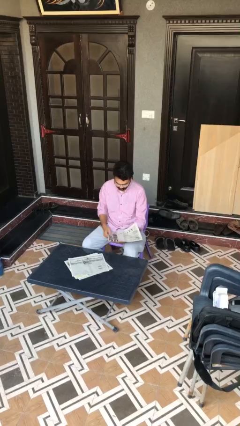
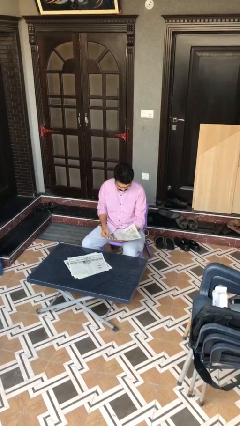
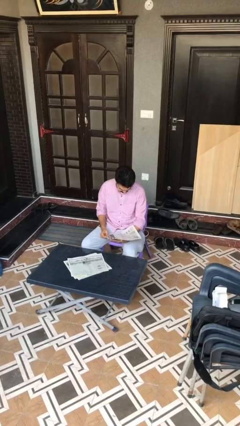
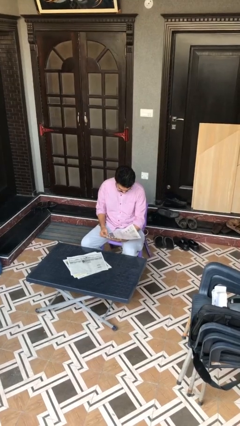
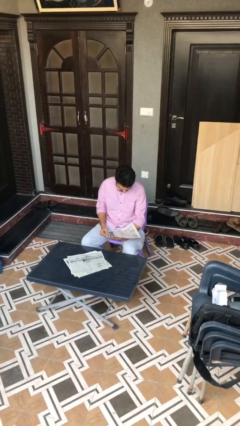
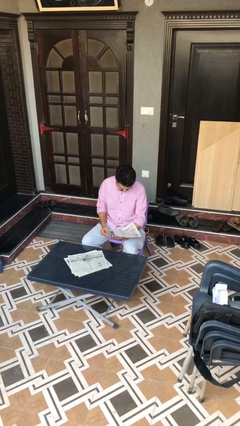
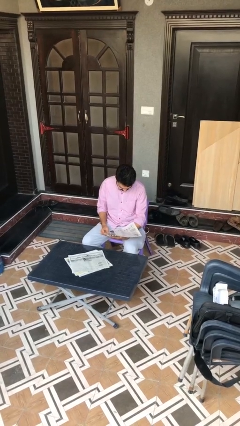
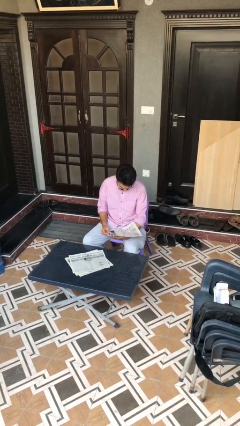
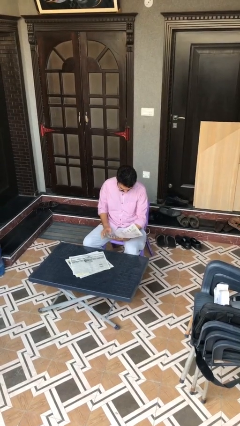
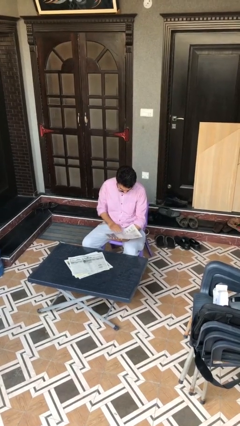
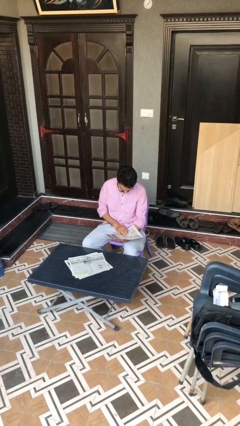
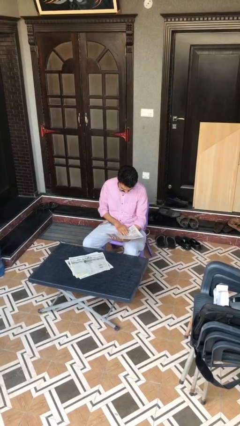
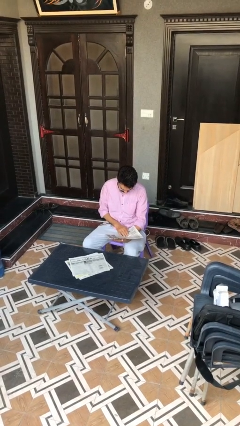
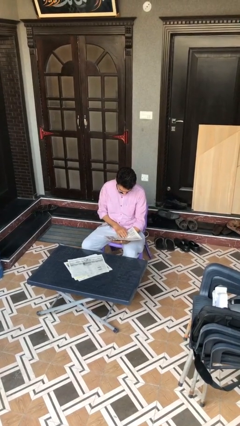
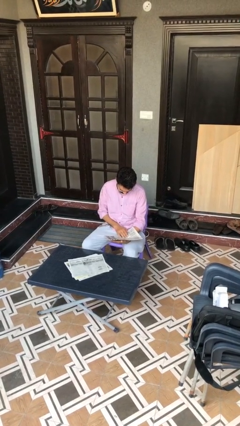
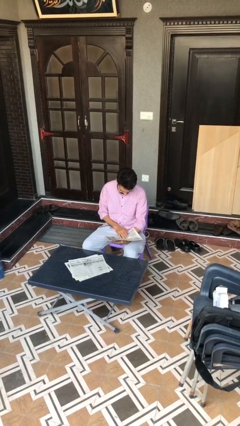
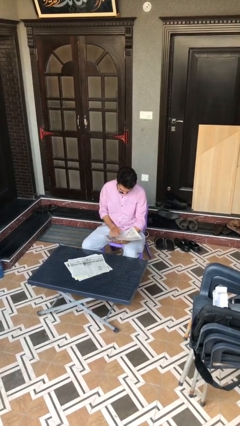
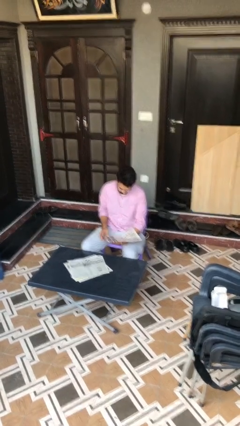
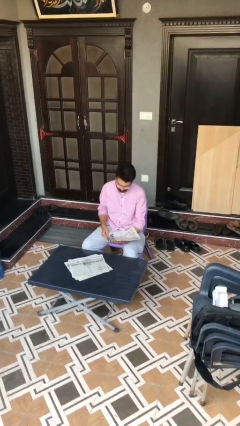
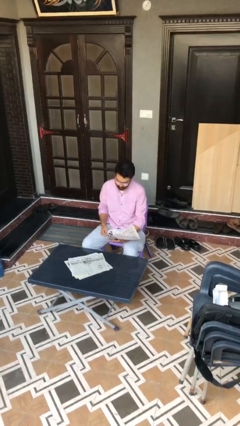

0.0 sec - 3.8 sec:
person reads document

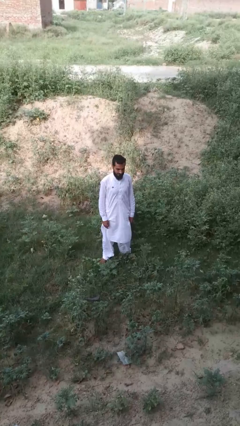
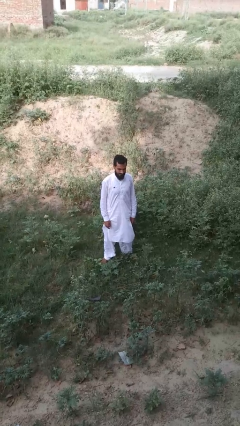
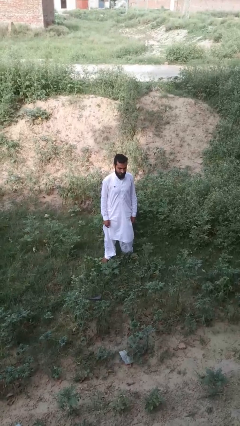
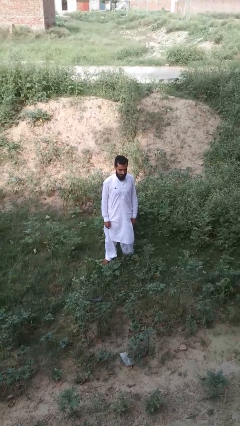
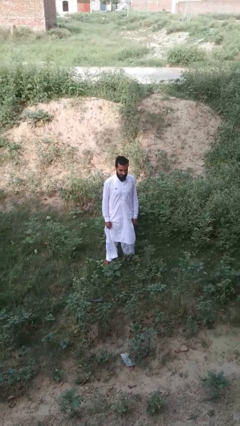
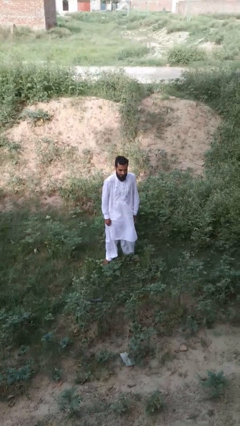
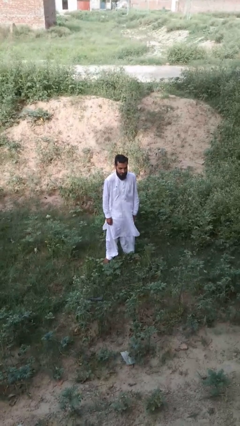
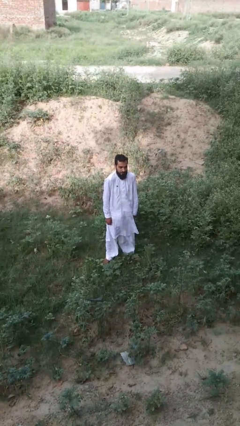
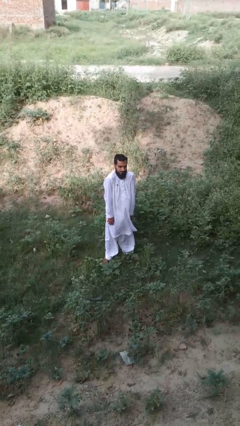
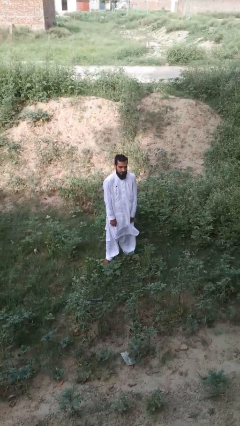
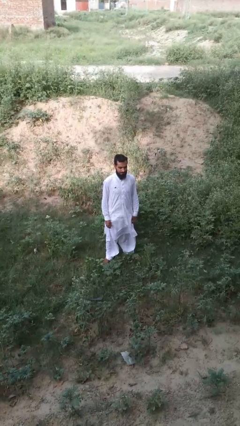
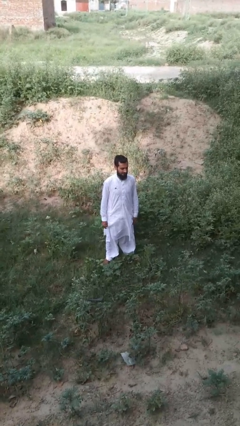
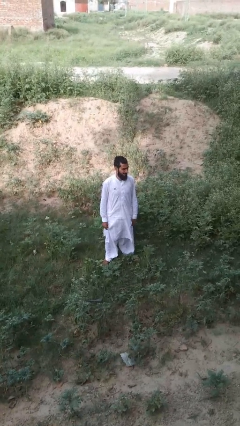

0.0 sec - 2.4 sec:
person shrugs

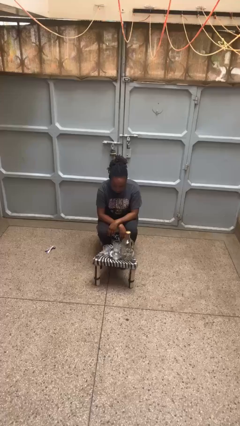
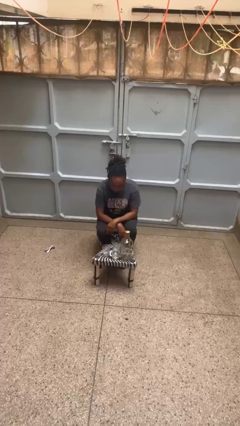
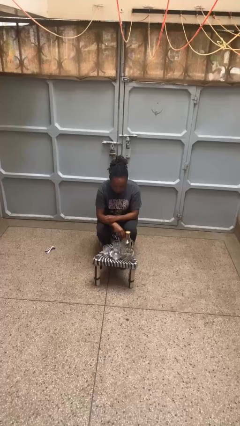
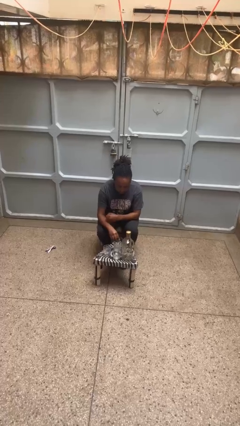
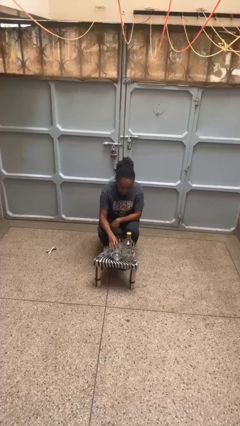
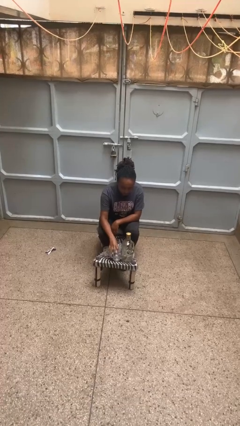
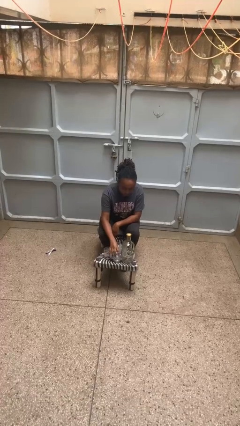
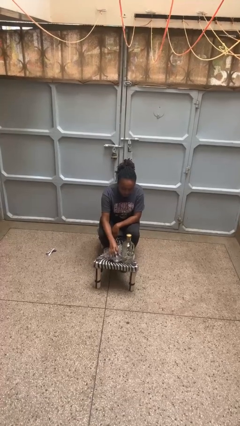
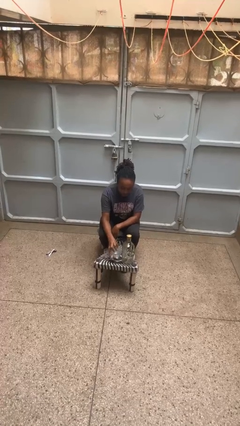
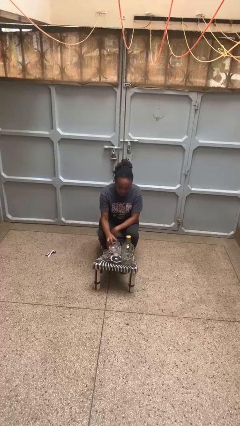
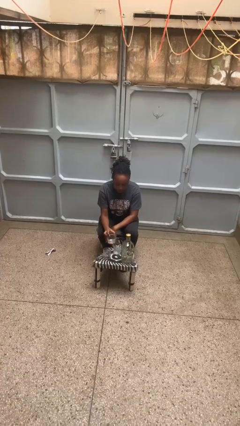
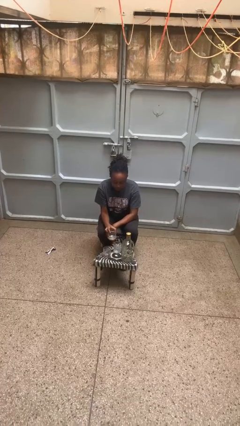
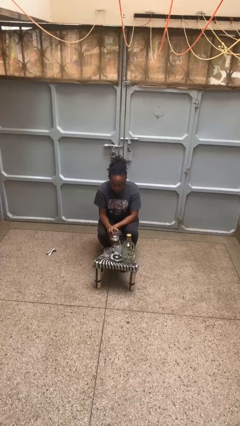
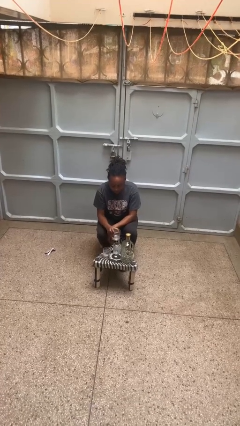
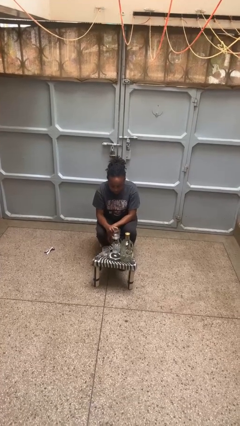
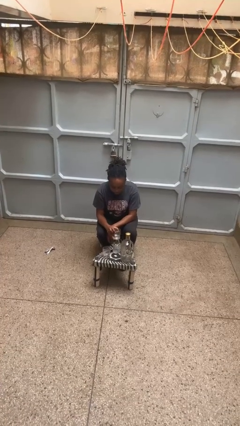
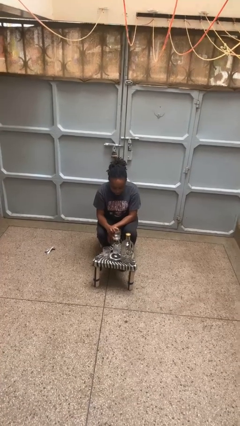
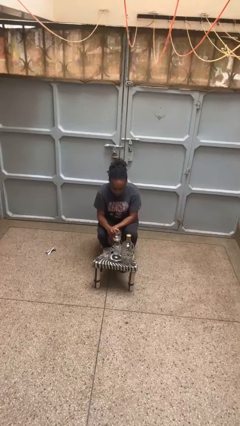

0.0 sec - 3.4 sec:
person picks up object from table

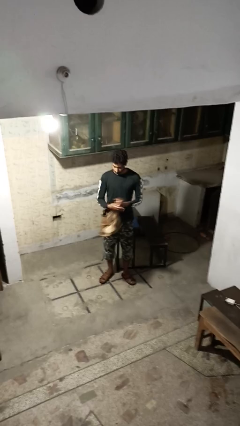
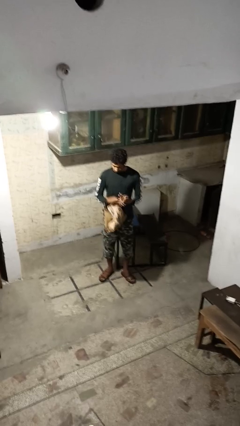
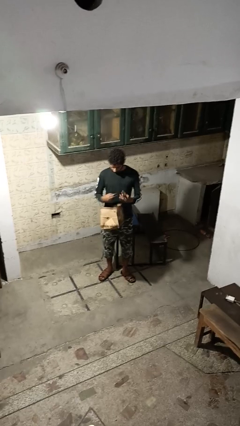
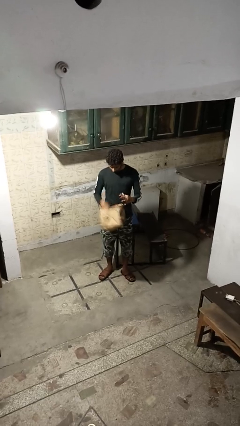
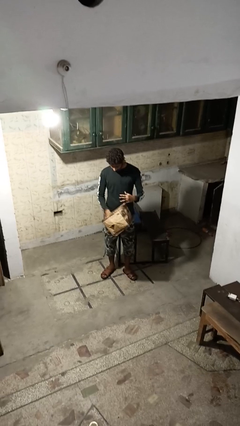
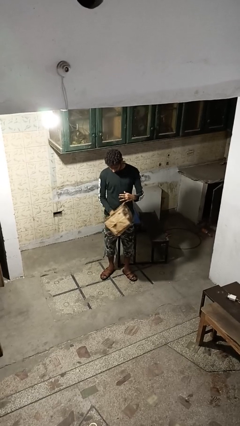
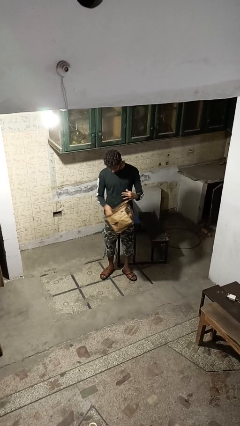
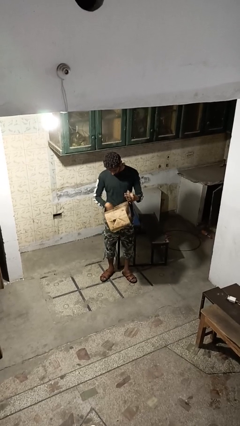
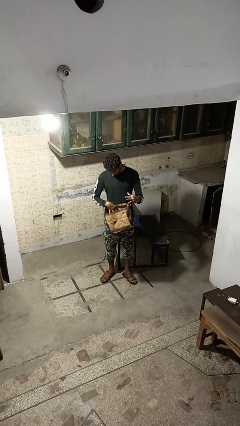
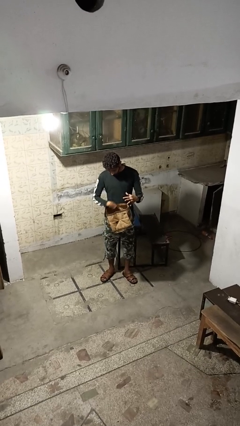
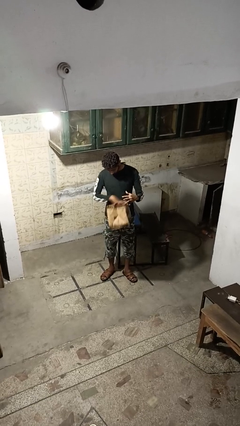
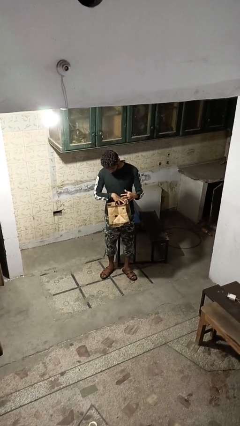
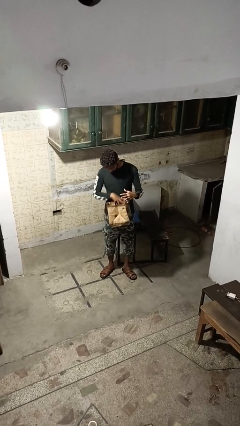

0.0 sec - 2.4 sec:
person searches in purse

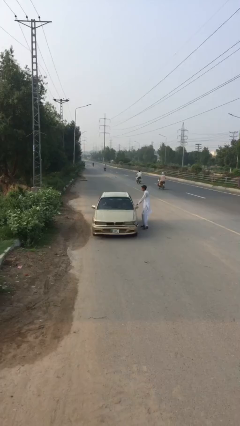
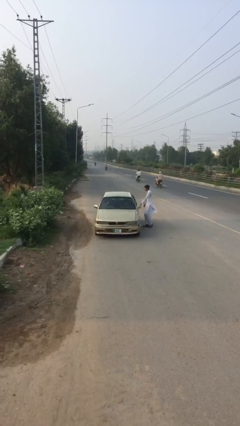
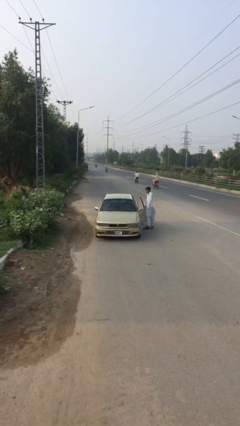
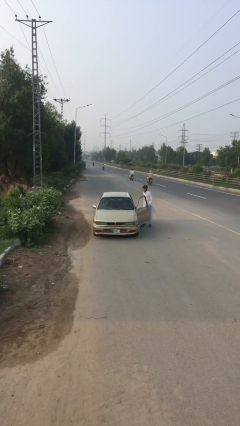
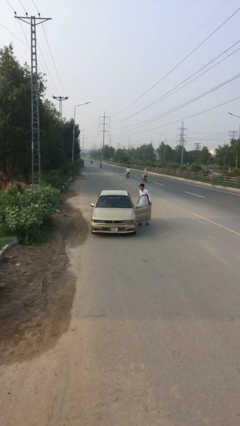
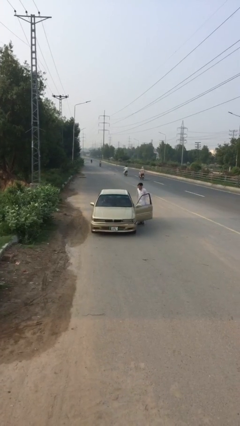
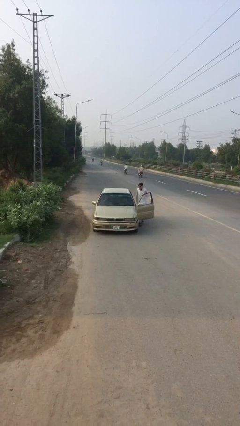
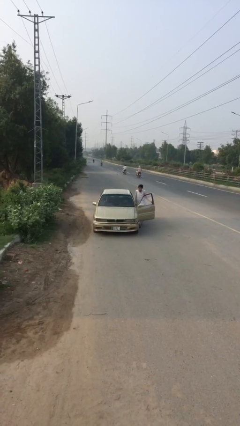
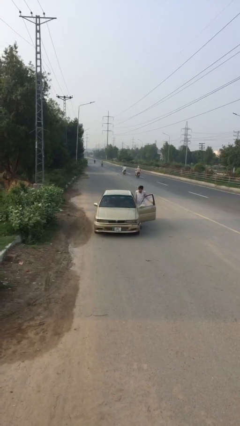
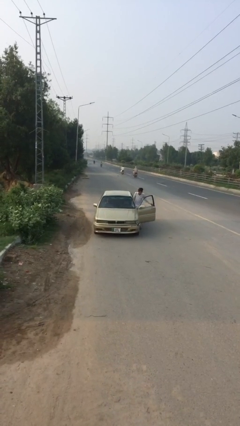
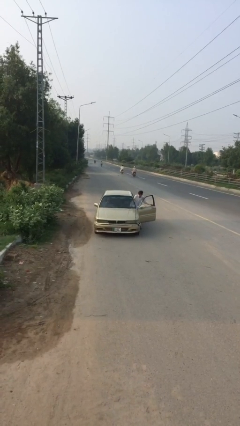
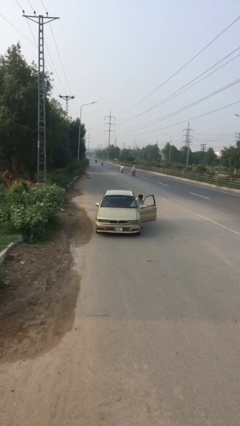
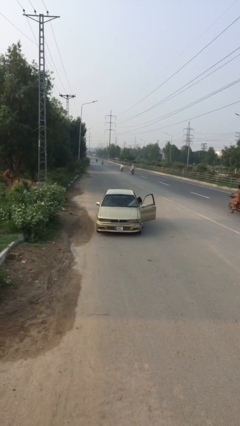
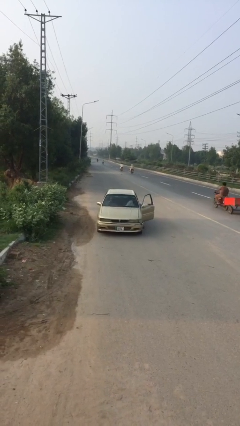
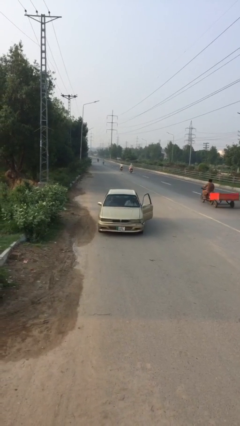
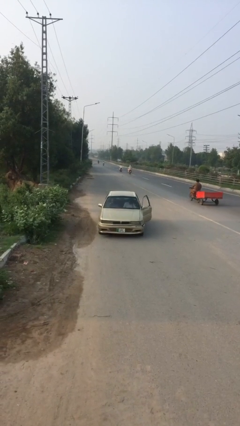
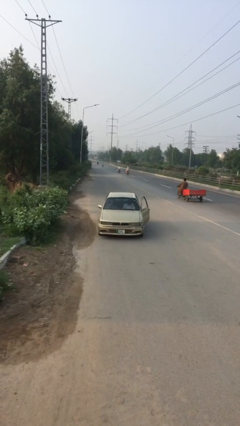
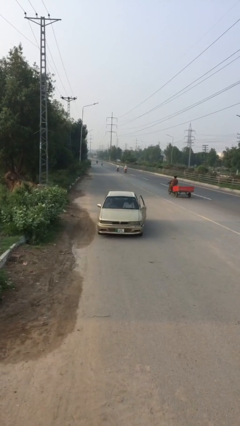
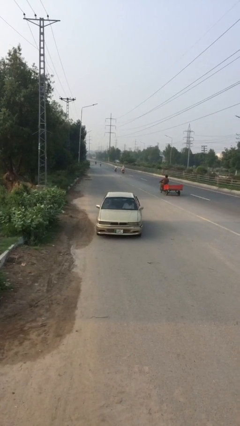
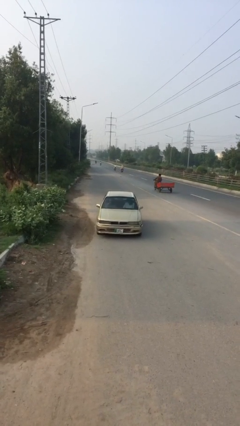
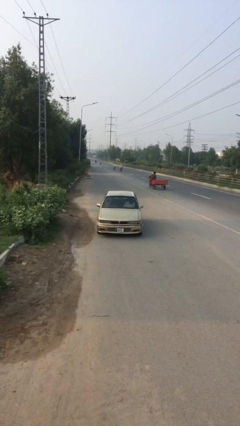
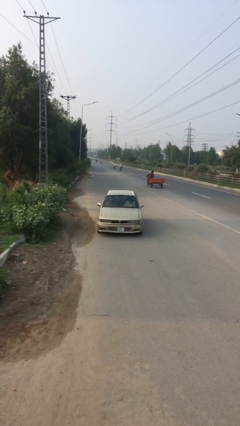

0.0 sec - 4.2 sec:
car picks up person

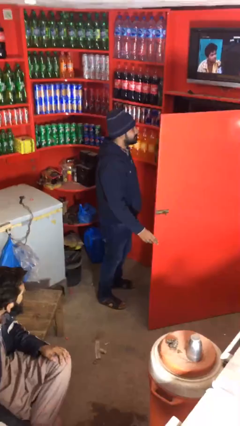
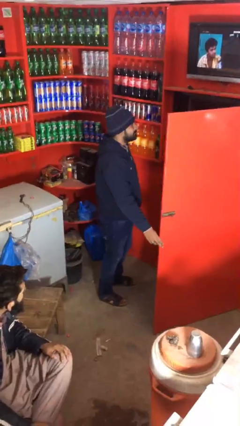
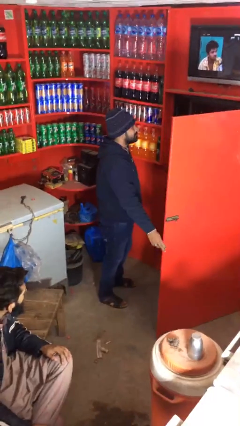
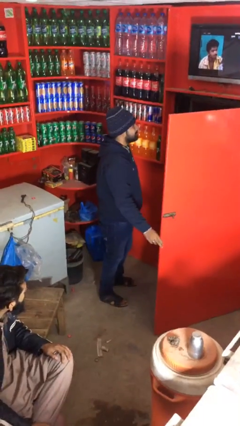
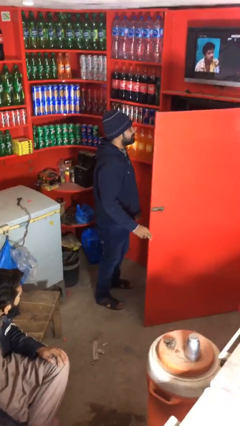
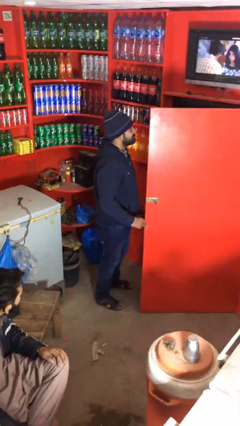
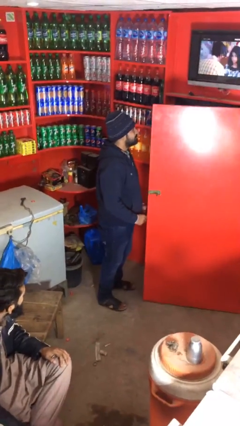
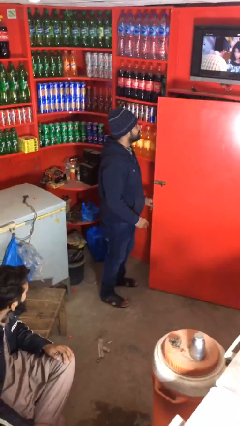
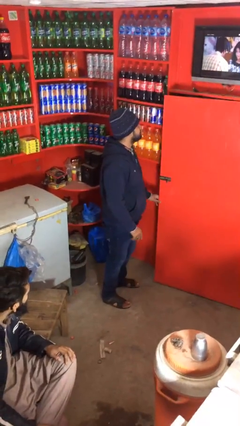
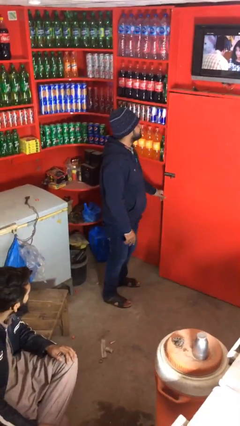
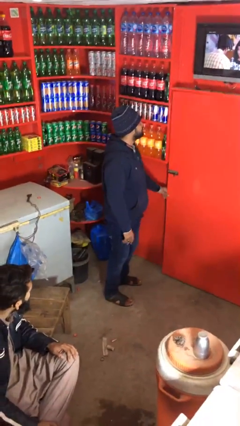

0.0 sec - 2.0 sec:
person closes facility door
